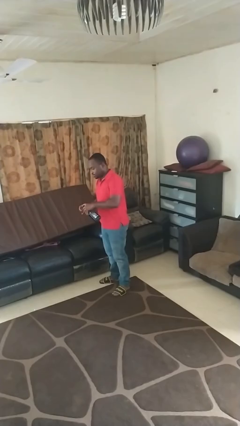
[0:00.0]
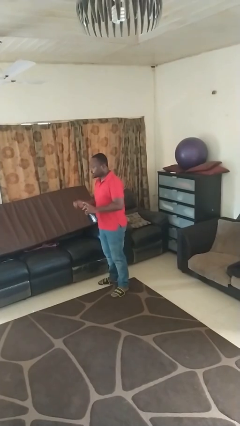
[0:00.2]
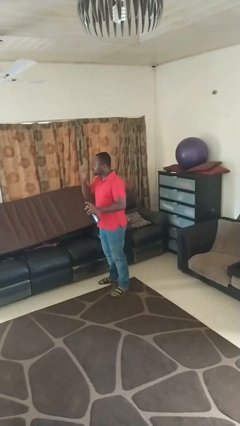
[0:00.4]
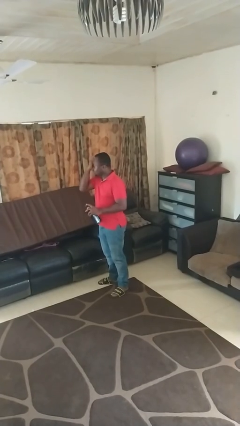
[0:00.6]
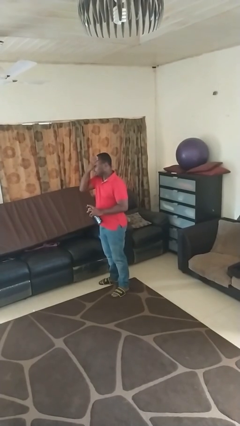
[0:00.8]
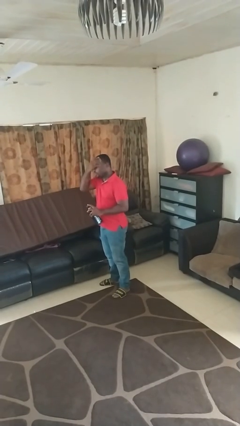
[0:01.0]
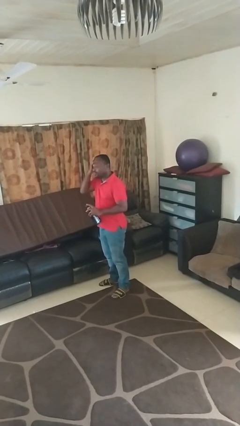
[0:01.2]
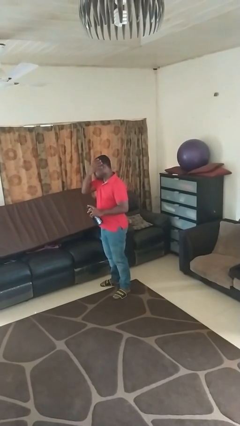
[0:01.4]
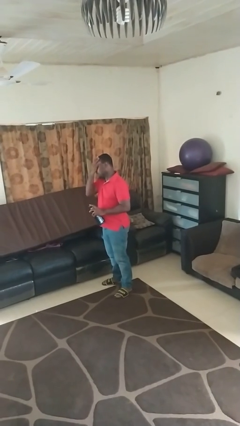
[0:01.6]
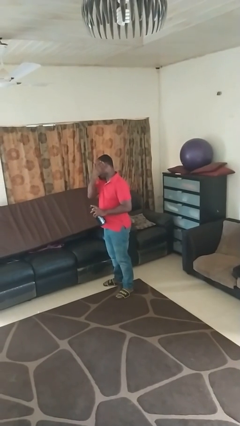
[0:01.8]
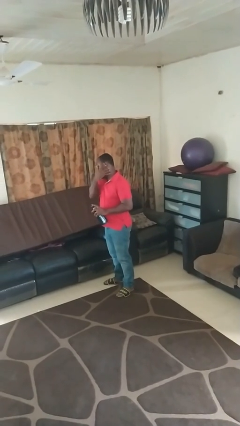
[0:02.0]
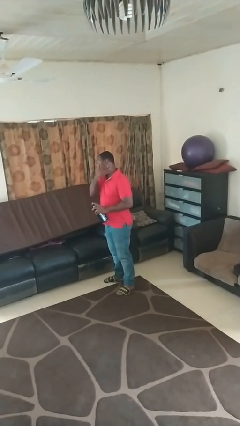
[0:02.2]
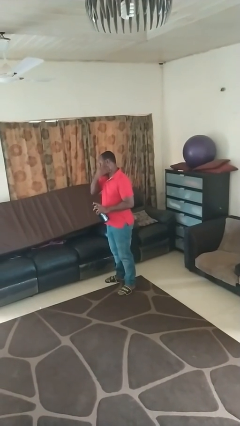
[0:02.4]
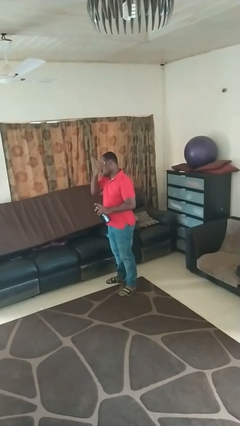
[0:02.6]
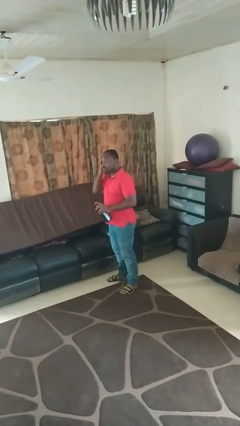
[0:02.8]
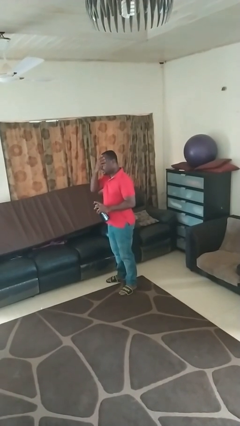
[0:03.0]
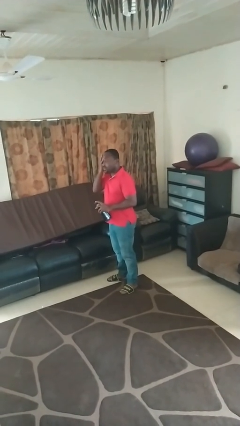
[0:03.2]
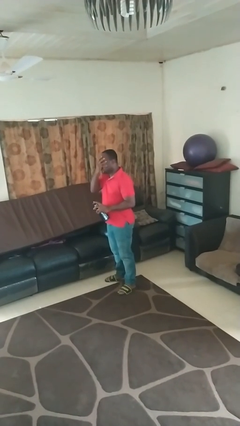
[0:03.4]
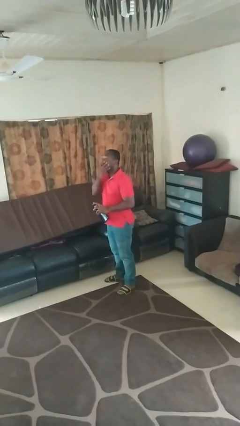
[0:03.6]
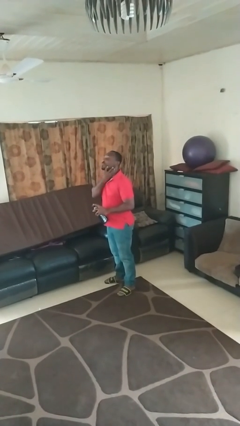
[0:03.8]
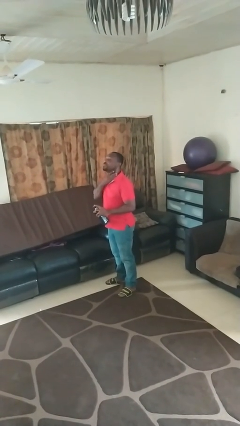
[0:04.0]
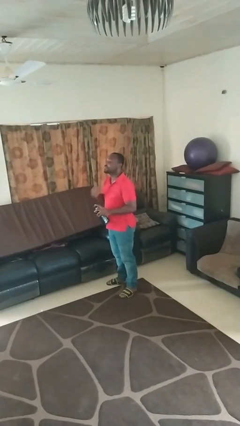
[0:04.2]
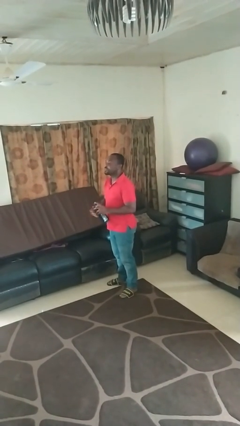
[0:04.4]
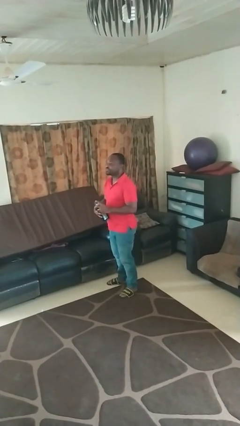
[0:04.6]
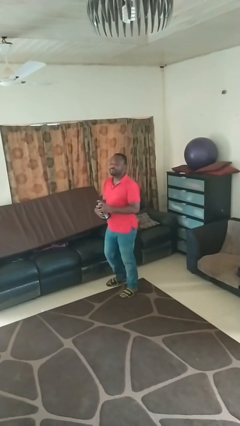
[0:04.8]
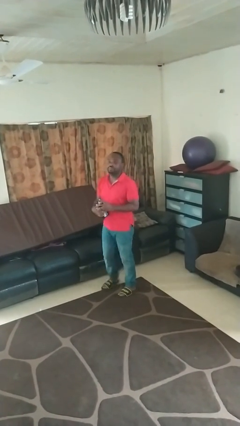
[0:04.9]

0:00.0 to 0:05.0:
person applies facial moisturizer

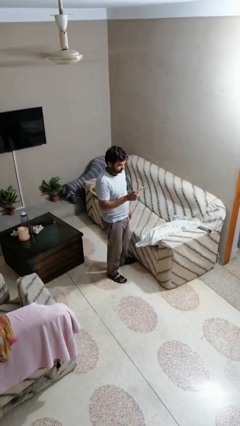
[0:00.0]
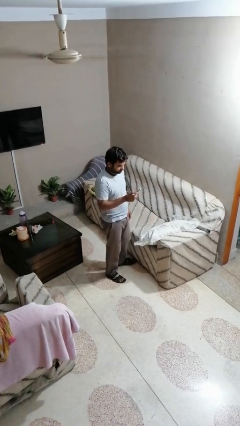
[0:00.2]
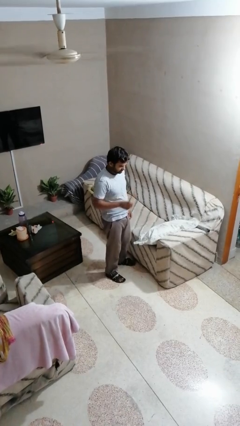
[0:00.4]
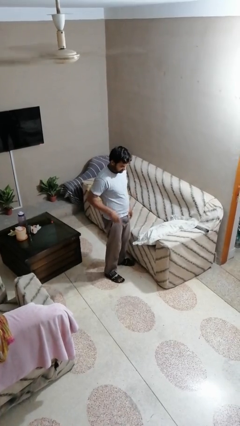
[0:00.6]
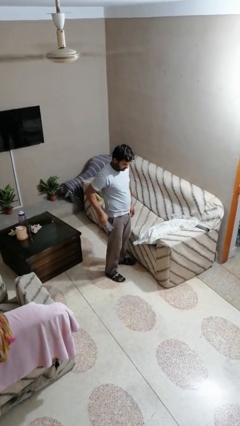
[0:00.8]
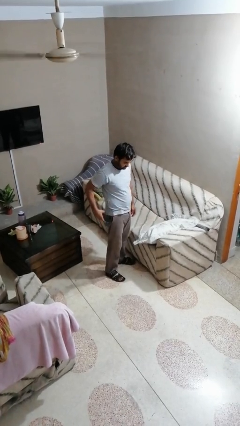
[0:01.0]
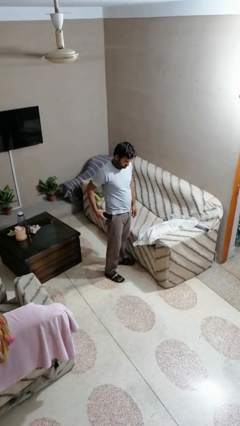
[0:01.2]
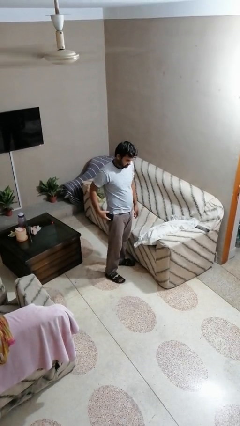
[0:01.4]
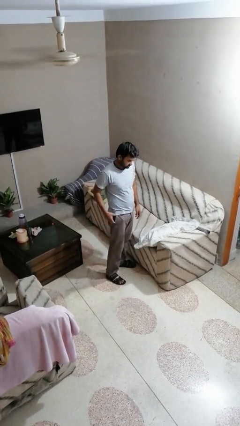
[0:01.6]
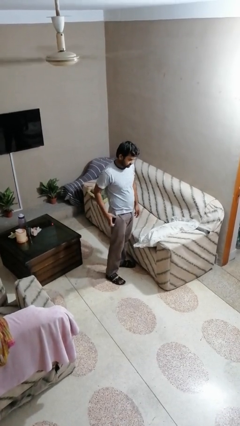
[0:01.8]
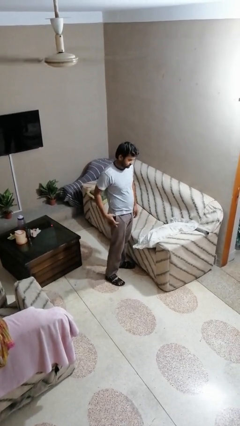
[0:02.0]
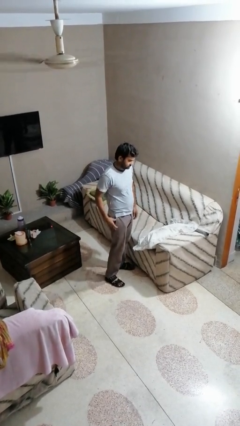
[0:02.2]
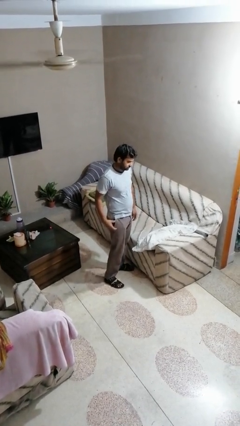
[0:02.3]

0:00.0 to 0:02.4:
person puts phone into pocket

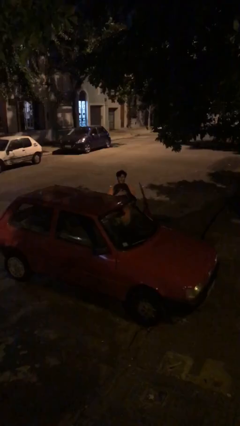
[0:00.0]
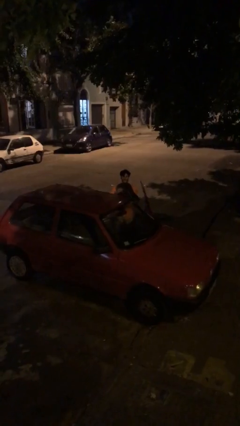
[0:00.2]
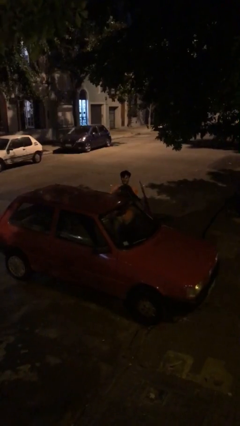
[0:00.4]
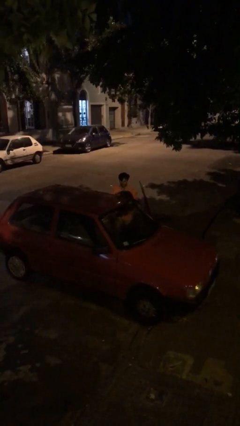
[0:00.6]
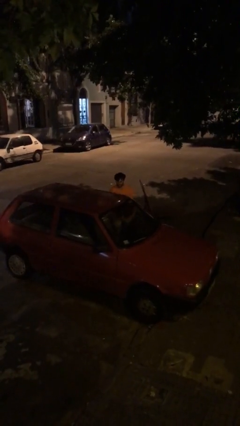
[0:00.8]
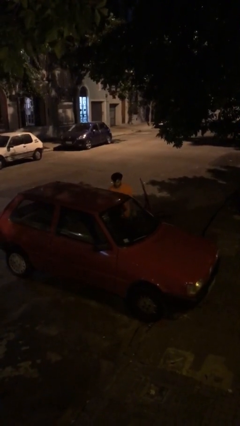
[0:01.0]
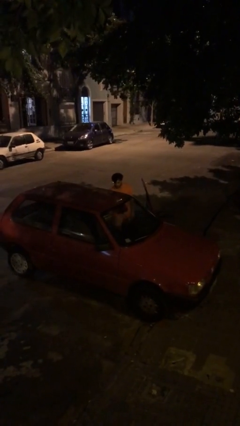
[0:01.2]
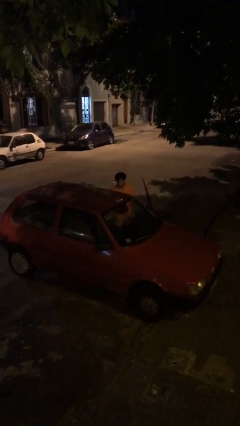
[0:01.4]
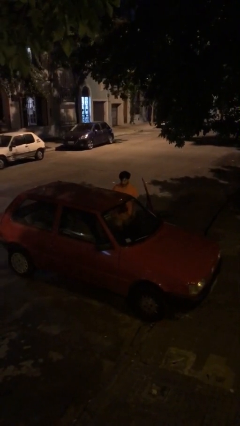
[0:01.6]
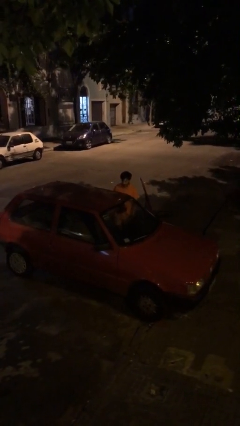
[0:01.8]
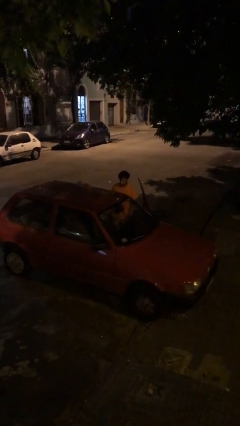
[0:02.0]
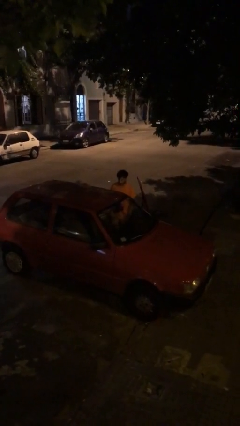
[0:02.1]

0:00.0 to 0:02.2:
person loads car

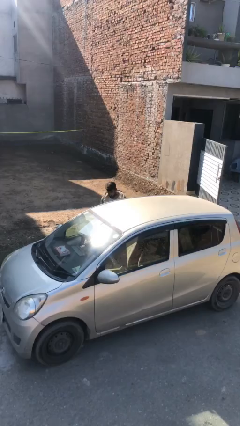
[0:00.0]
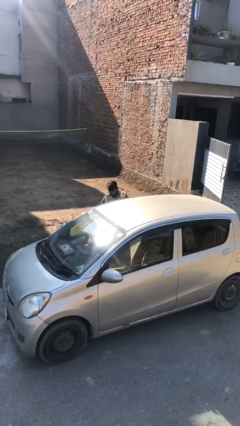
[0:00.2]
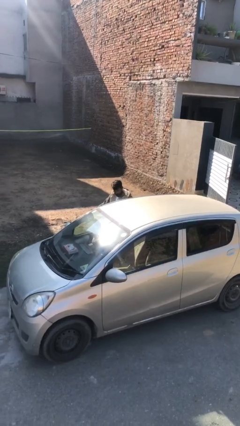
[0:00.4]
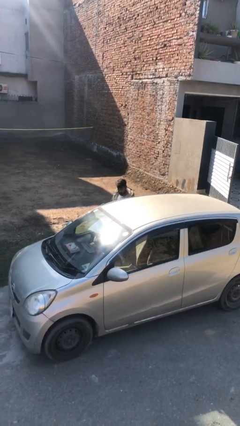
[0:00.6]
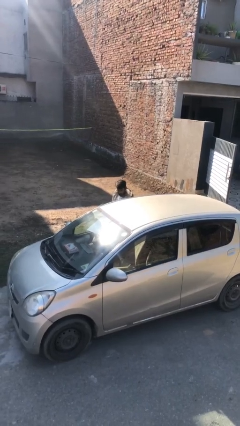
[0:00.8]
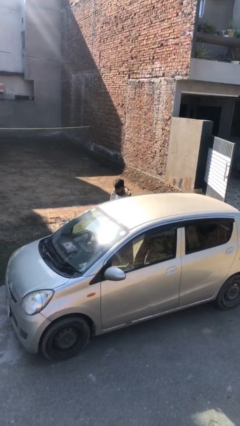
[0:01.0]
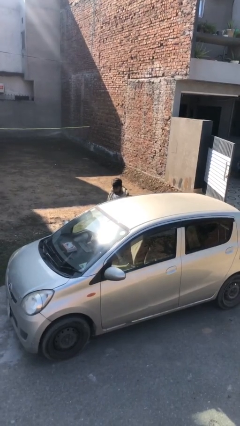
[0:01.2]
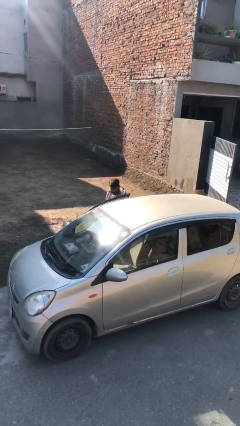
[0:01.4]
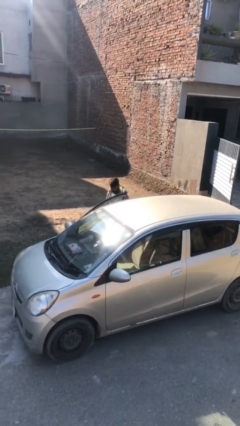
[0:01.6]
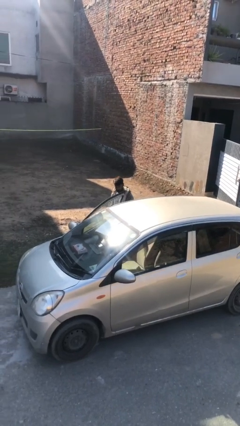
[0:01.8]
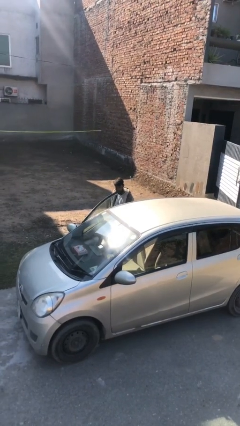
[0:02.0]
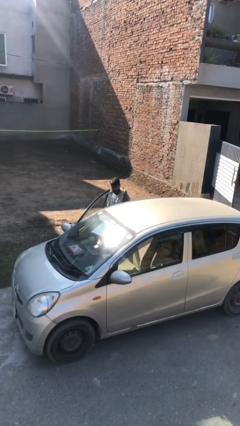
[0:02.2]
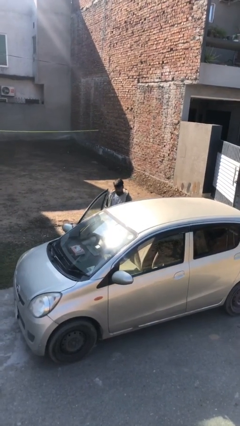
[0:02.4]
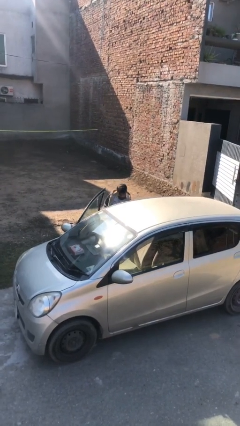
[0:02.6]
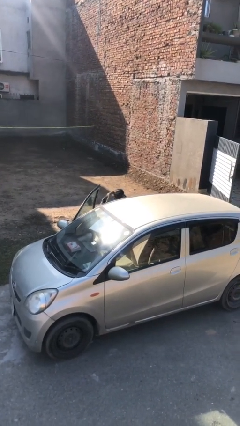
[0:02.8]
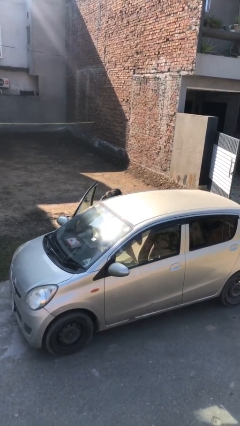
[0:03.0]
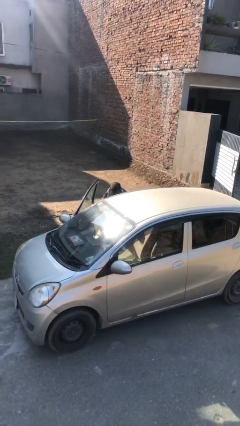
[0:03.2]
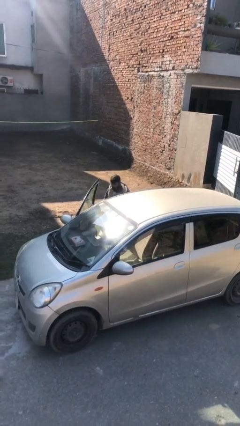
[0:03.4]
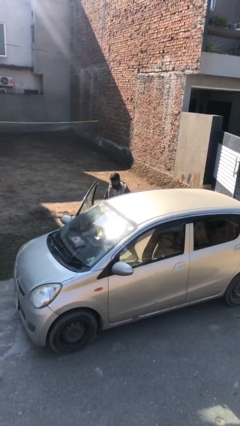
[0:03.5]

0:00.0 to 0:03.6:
person opens car door

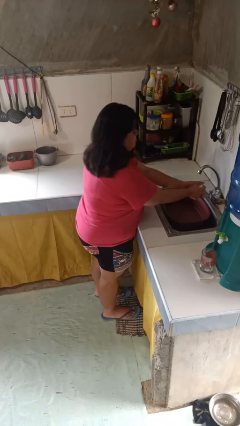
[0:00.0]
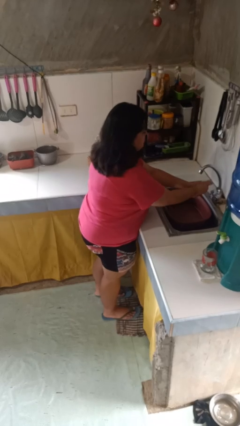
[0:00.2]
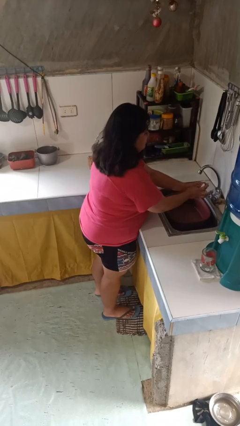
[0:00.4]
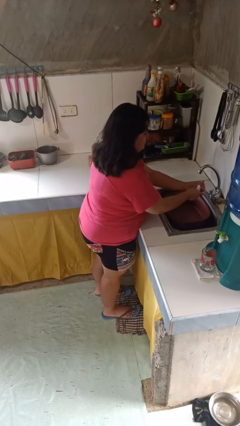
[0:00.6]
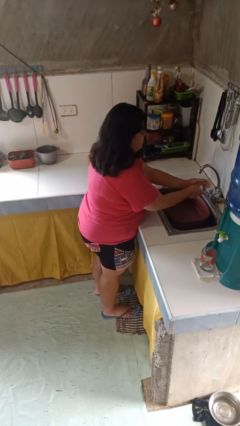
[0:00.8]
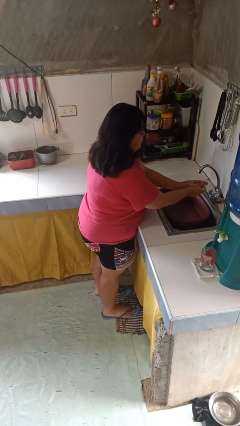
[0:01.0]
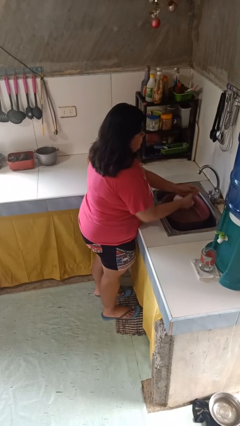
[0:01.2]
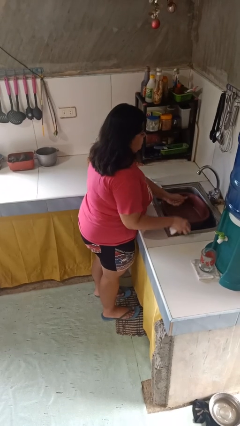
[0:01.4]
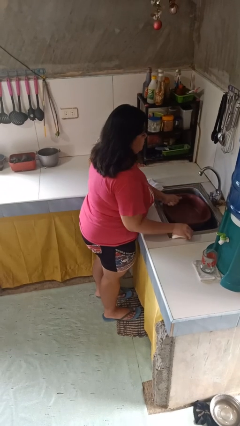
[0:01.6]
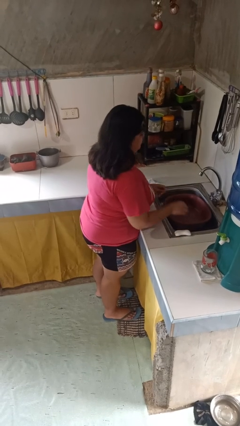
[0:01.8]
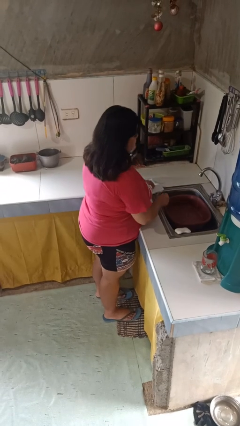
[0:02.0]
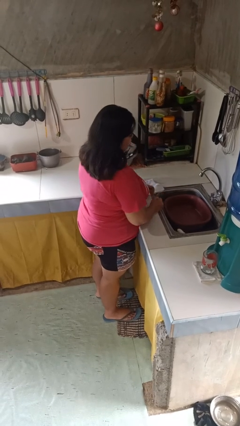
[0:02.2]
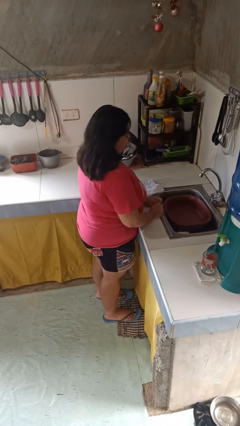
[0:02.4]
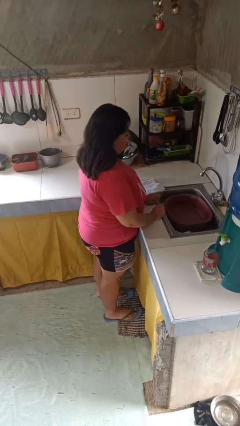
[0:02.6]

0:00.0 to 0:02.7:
person washes hands

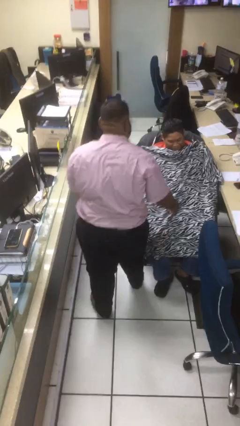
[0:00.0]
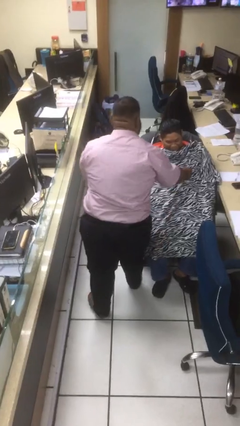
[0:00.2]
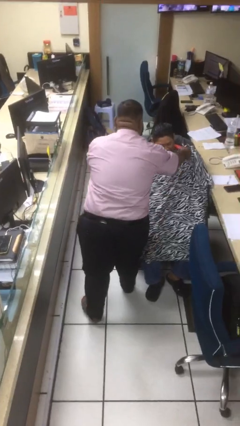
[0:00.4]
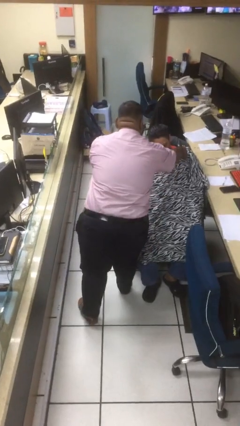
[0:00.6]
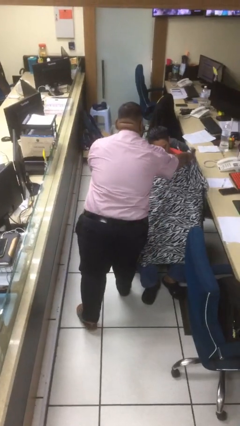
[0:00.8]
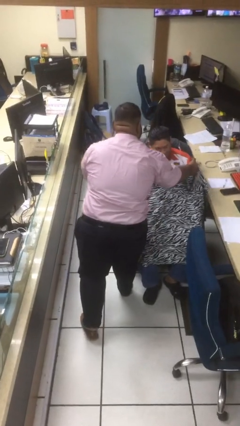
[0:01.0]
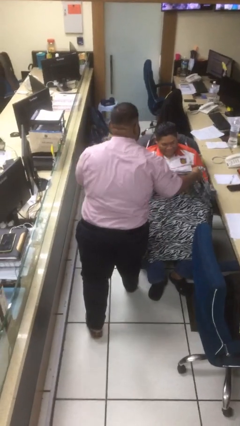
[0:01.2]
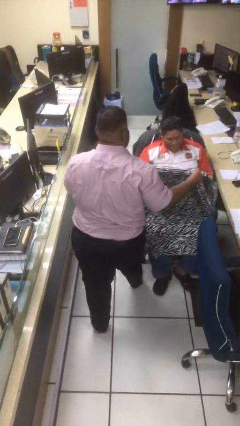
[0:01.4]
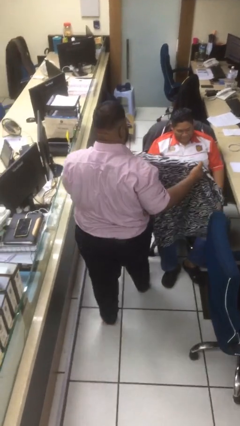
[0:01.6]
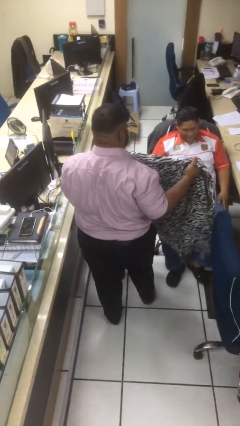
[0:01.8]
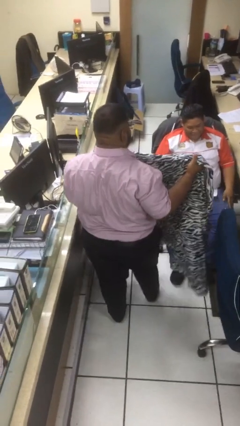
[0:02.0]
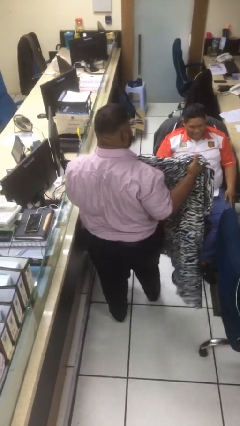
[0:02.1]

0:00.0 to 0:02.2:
person uncovers friend with blanket
